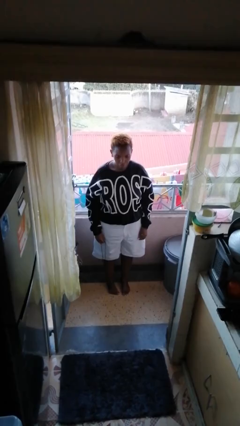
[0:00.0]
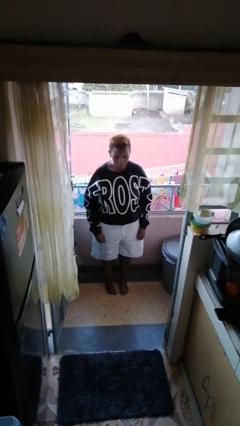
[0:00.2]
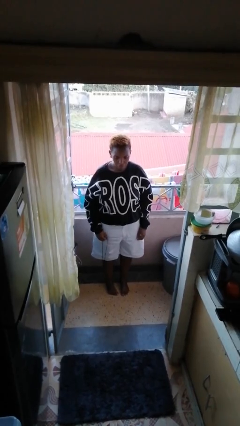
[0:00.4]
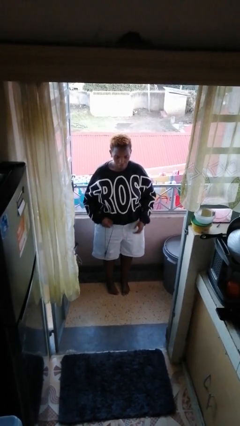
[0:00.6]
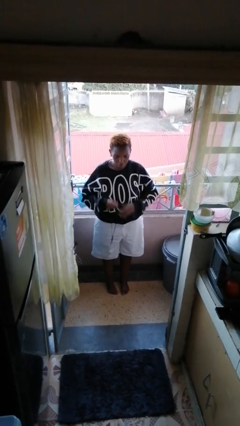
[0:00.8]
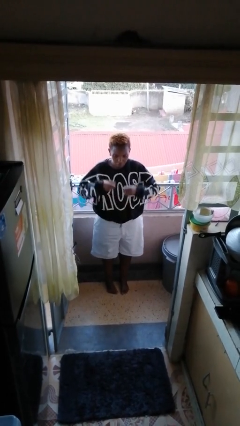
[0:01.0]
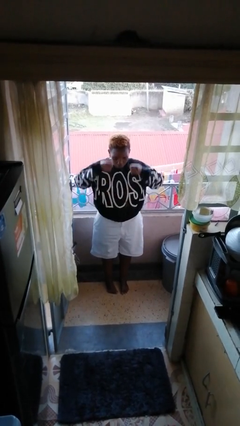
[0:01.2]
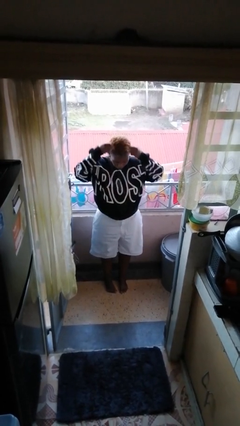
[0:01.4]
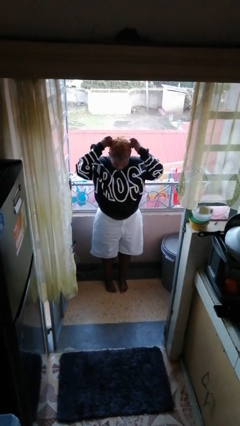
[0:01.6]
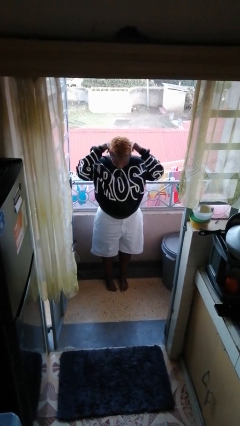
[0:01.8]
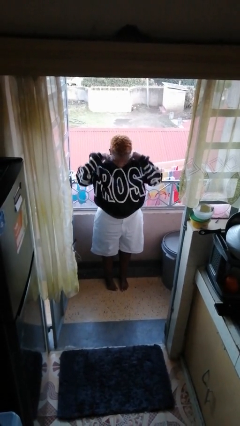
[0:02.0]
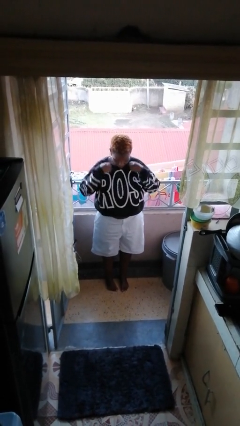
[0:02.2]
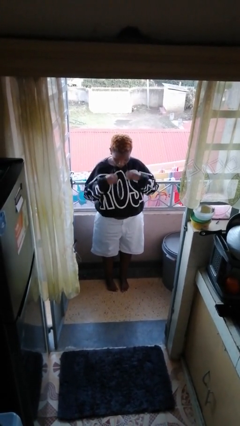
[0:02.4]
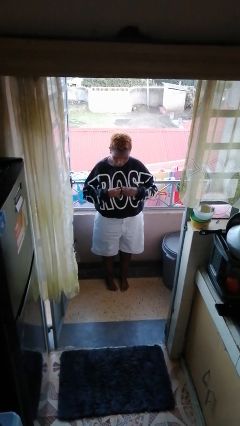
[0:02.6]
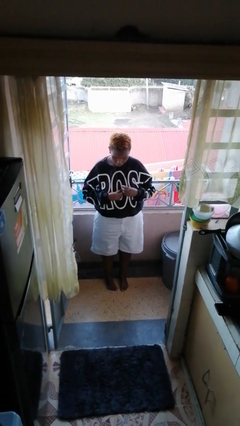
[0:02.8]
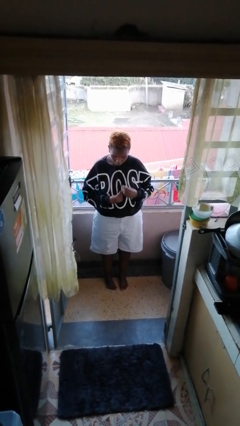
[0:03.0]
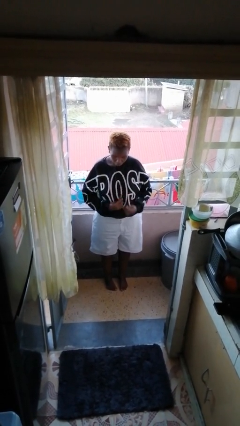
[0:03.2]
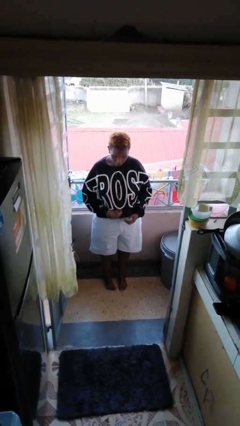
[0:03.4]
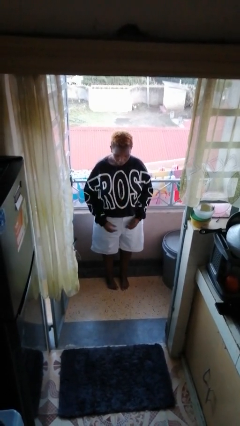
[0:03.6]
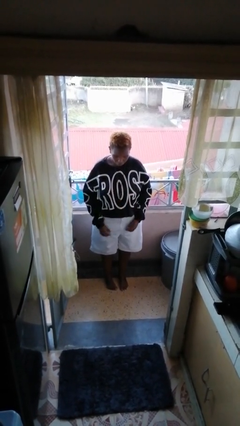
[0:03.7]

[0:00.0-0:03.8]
person puts on necklace

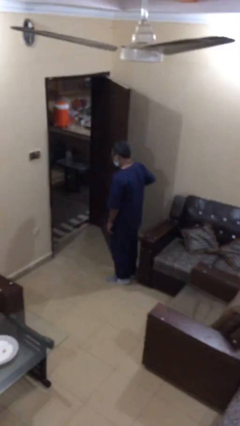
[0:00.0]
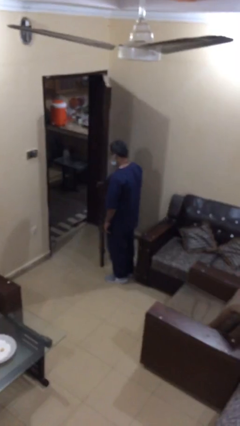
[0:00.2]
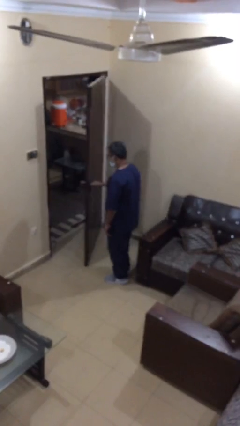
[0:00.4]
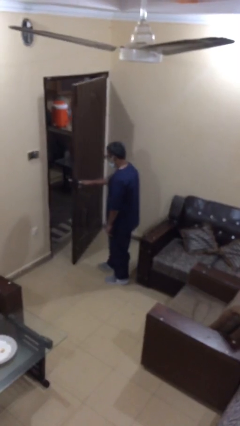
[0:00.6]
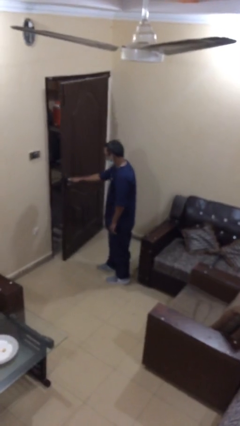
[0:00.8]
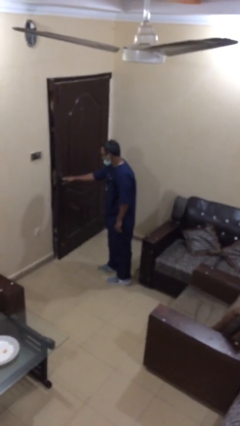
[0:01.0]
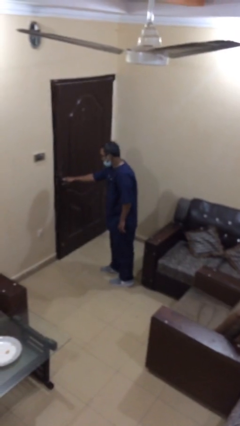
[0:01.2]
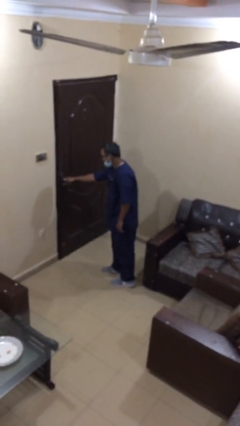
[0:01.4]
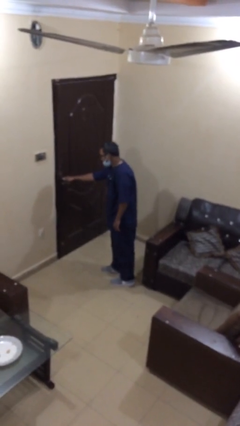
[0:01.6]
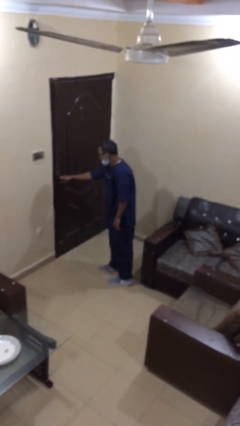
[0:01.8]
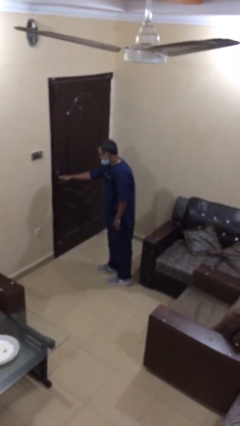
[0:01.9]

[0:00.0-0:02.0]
person closes facility door

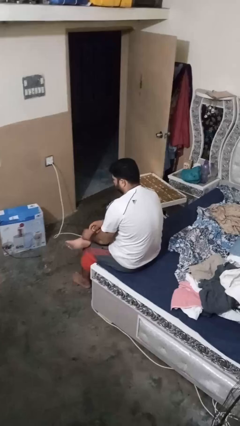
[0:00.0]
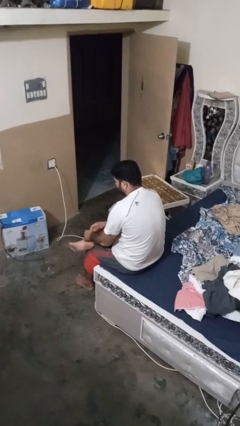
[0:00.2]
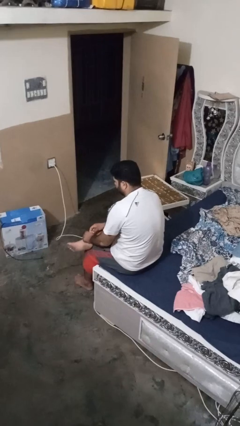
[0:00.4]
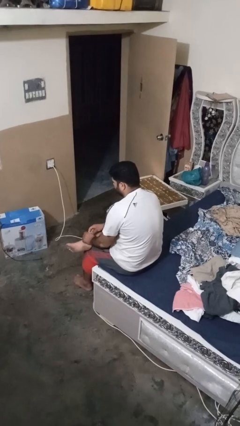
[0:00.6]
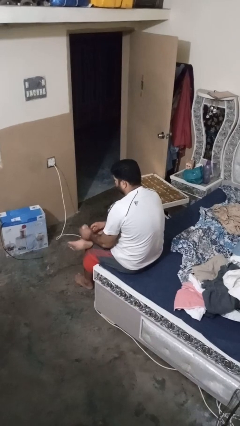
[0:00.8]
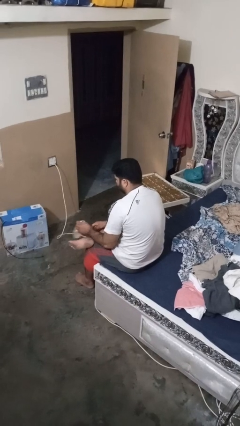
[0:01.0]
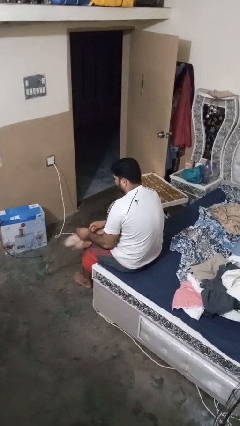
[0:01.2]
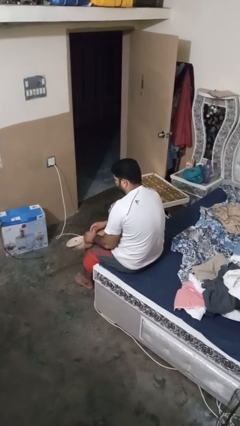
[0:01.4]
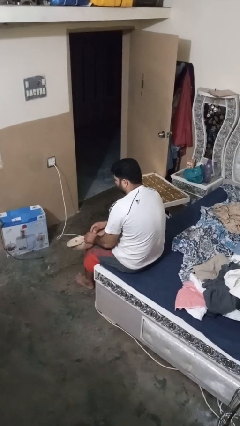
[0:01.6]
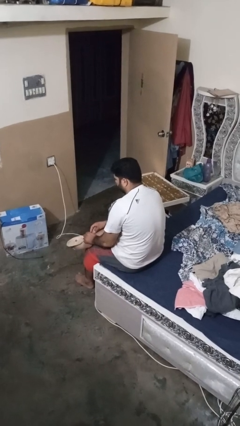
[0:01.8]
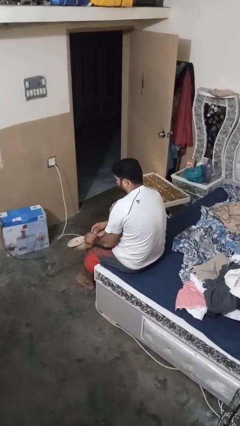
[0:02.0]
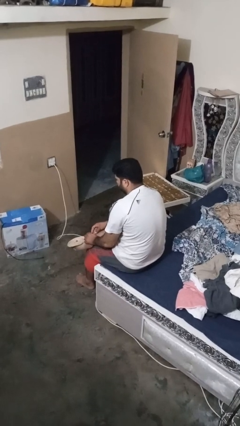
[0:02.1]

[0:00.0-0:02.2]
person puts on socks

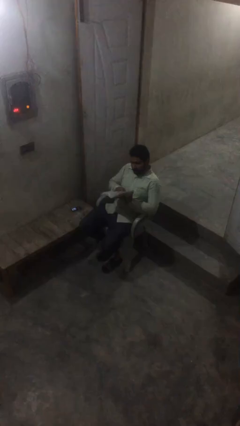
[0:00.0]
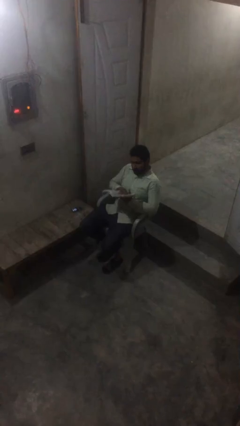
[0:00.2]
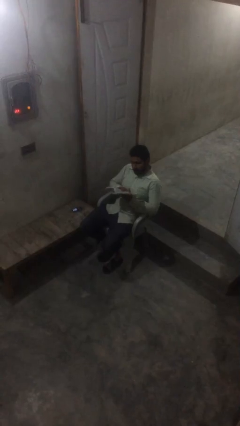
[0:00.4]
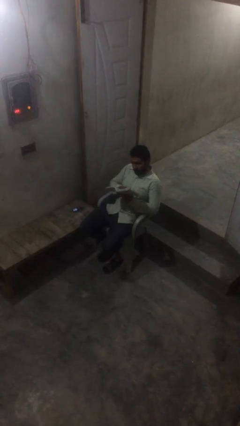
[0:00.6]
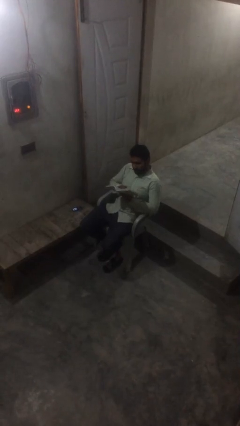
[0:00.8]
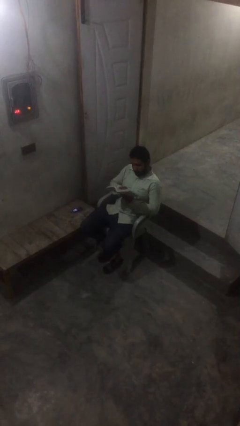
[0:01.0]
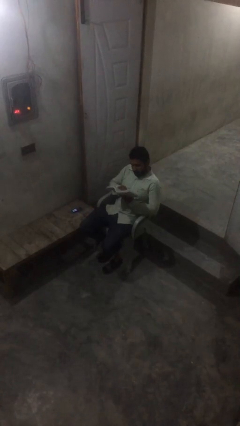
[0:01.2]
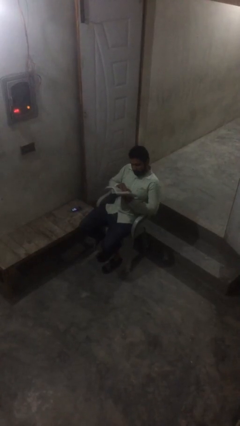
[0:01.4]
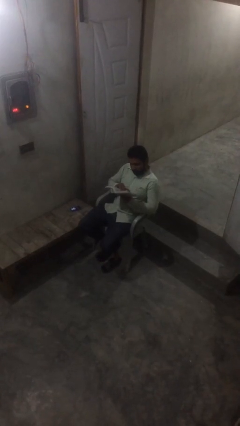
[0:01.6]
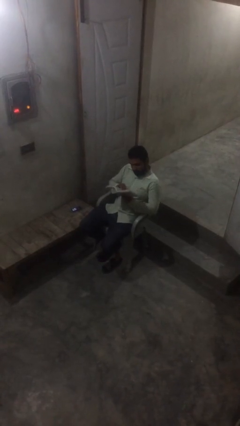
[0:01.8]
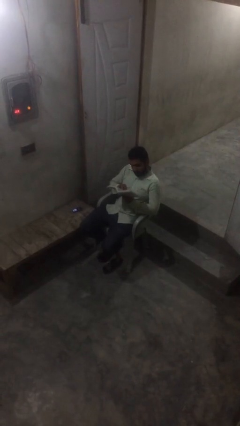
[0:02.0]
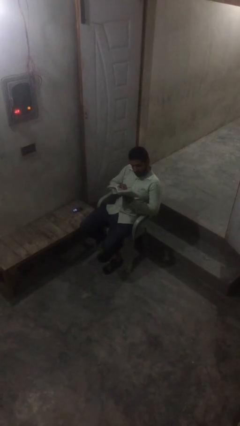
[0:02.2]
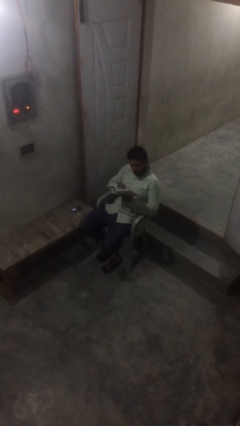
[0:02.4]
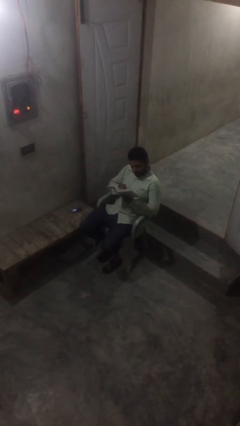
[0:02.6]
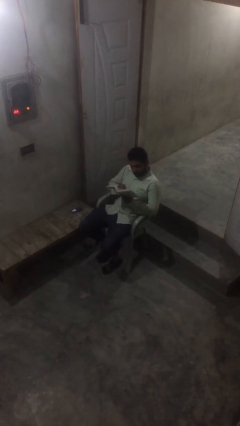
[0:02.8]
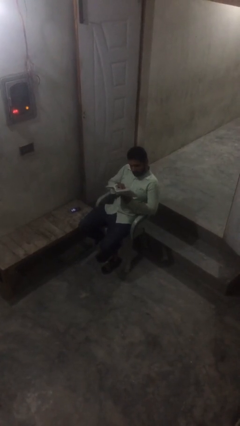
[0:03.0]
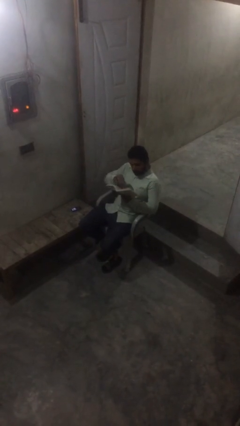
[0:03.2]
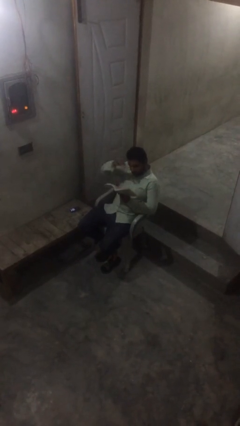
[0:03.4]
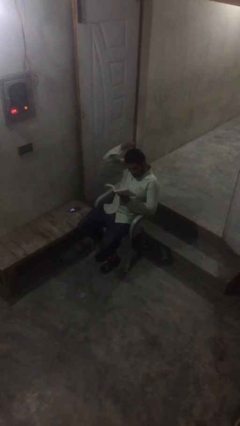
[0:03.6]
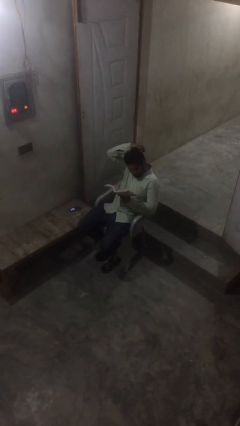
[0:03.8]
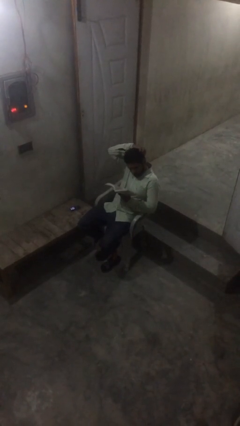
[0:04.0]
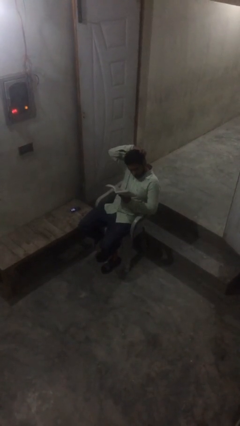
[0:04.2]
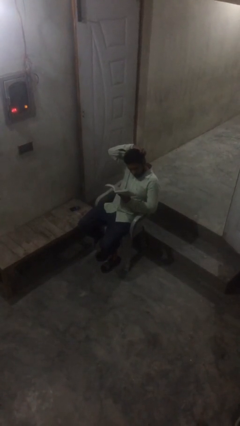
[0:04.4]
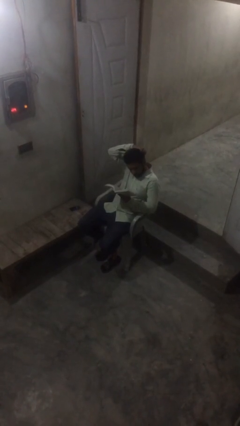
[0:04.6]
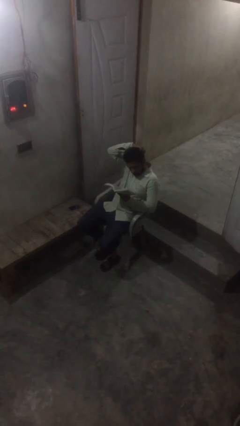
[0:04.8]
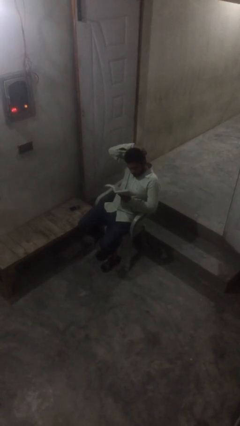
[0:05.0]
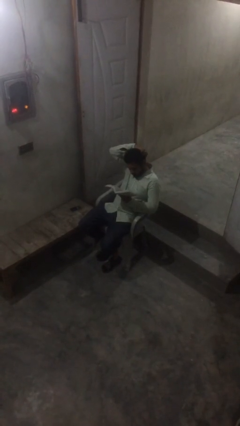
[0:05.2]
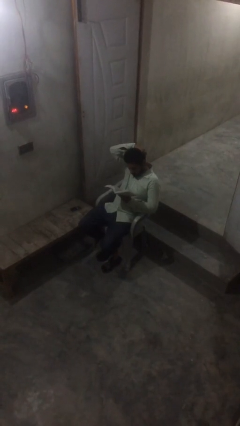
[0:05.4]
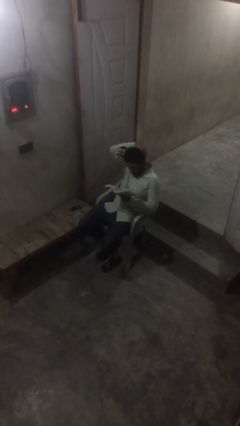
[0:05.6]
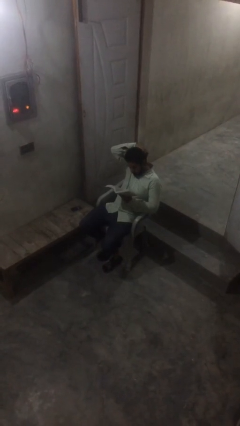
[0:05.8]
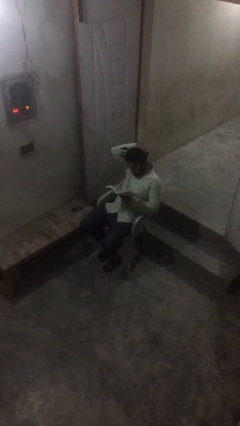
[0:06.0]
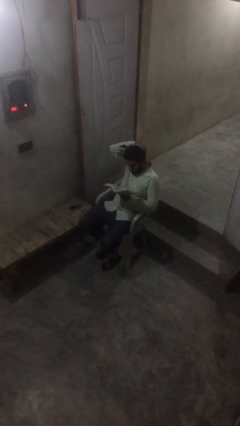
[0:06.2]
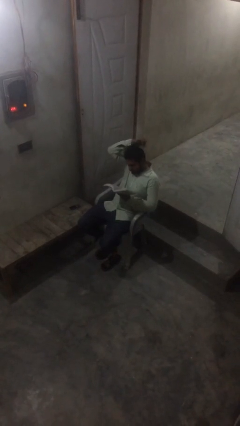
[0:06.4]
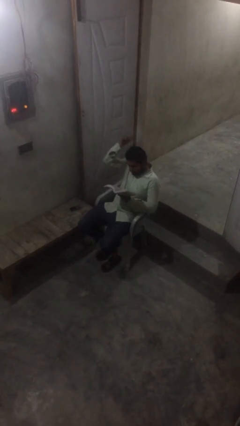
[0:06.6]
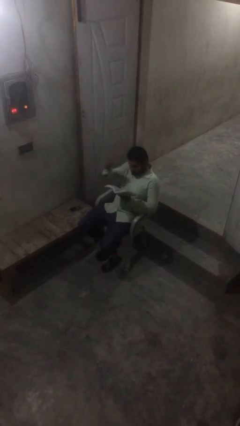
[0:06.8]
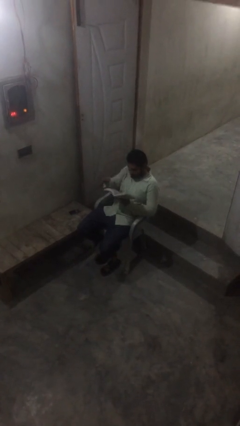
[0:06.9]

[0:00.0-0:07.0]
person reads document

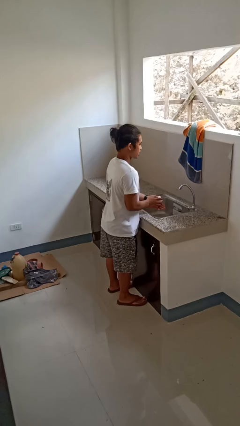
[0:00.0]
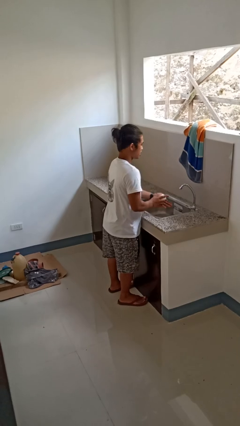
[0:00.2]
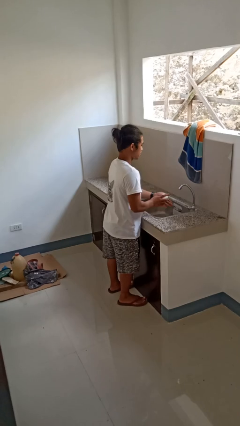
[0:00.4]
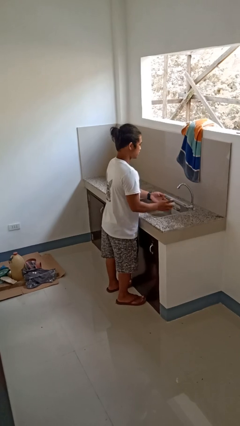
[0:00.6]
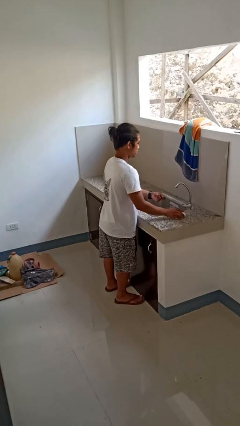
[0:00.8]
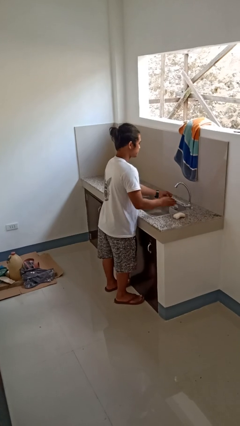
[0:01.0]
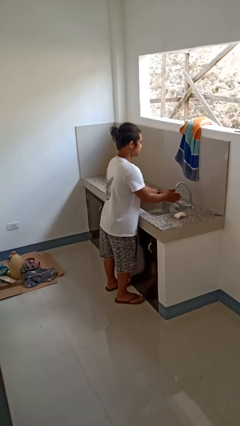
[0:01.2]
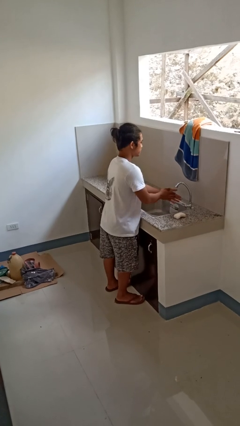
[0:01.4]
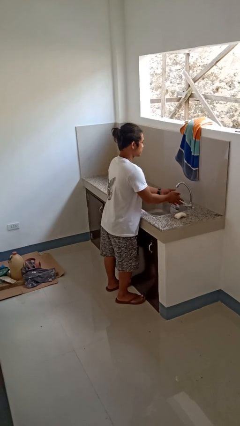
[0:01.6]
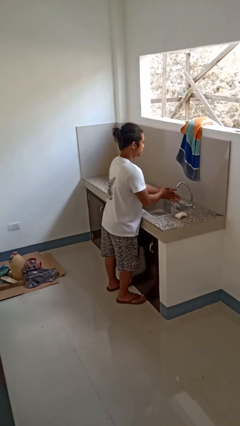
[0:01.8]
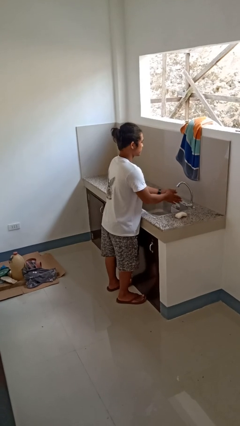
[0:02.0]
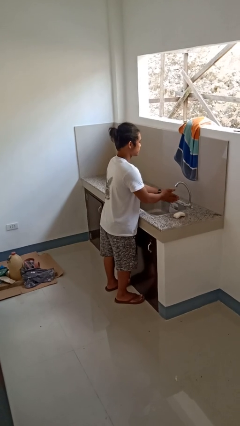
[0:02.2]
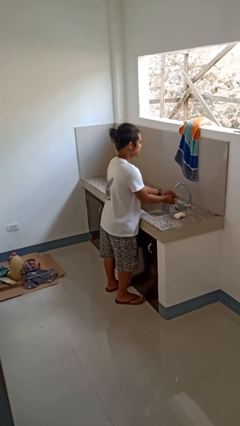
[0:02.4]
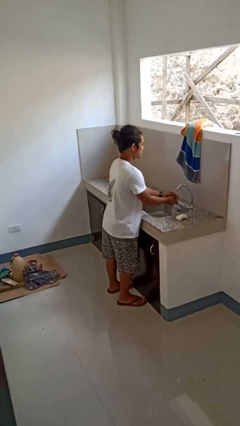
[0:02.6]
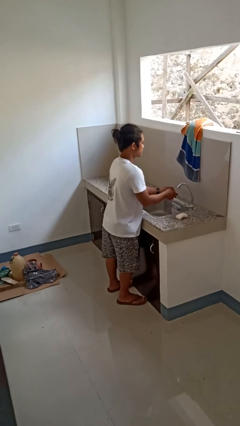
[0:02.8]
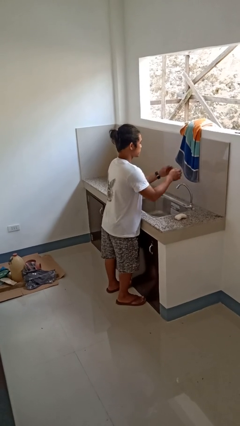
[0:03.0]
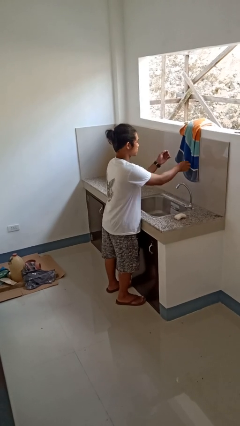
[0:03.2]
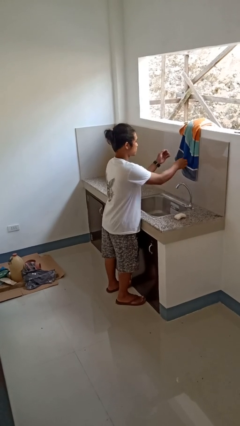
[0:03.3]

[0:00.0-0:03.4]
person washes hands
